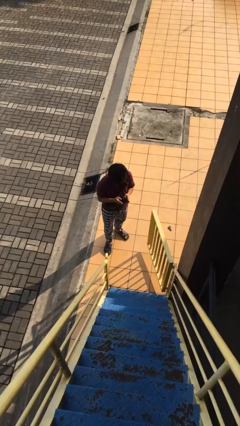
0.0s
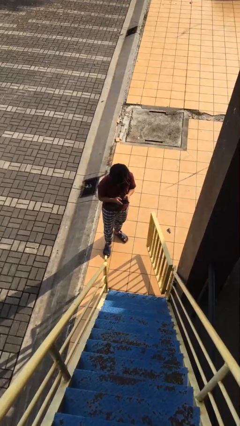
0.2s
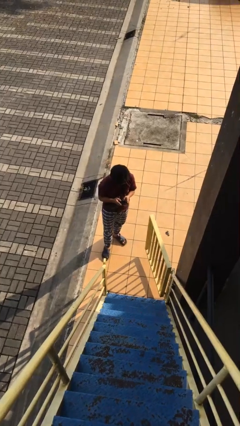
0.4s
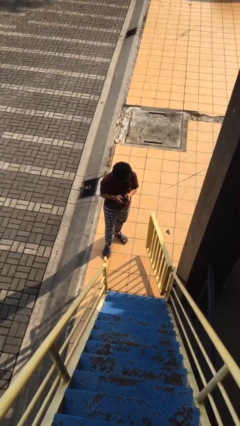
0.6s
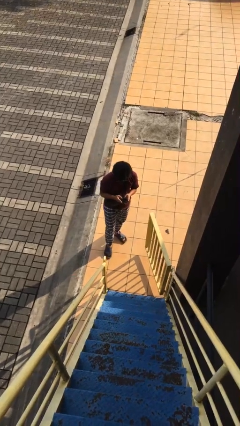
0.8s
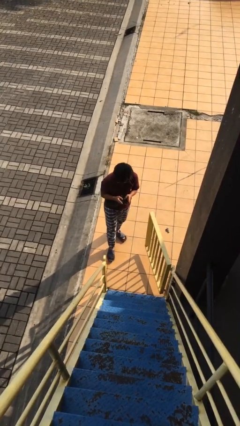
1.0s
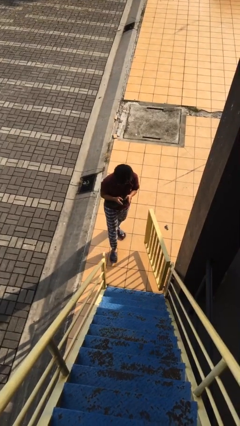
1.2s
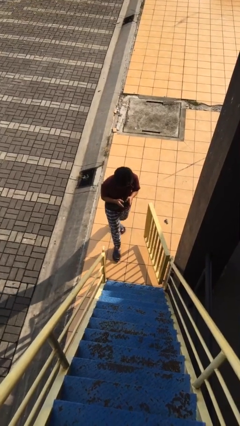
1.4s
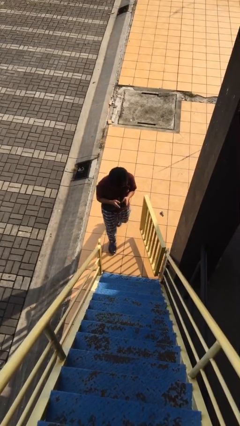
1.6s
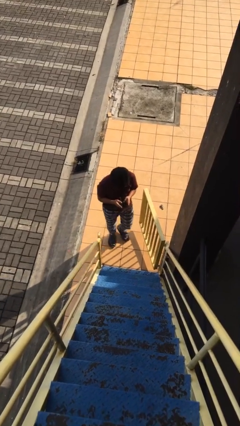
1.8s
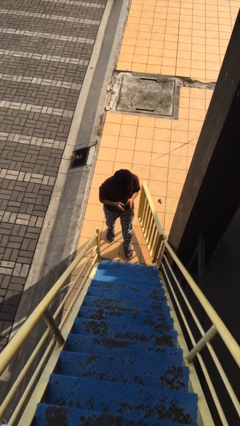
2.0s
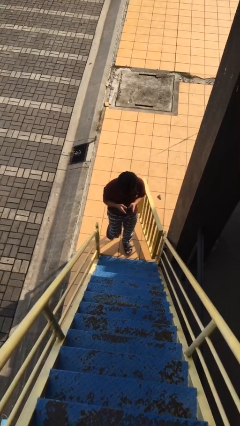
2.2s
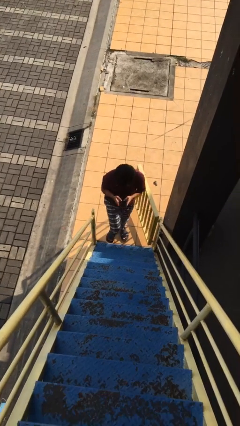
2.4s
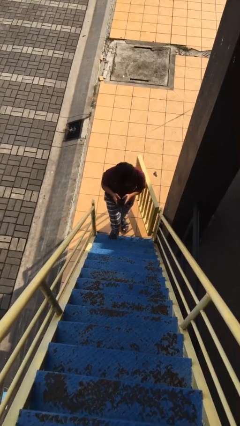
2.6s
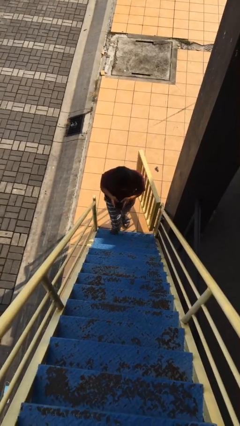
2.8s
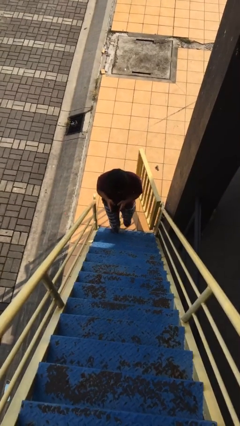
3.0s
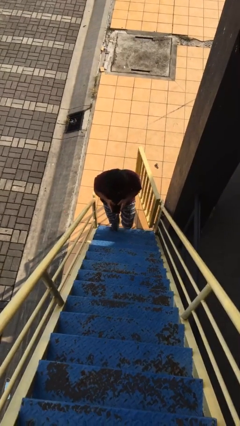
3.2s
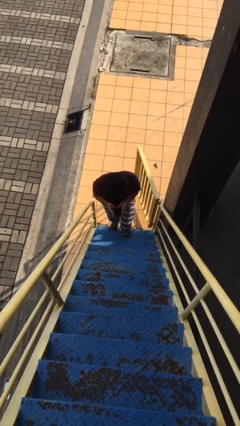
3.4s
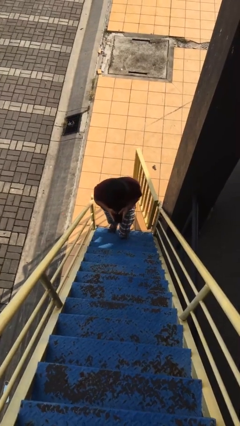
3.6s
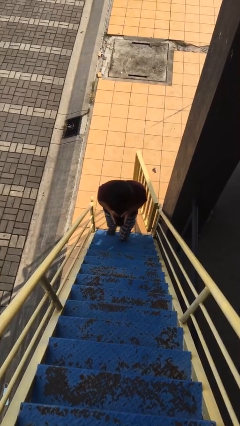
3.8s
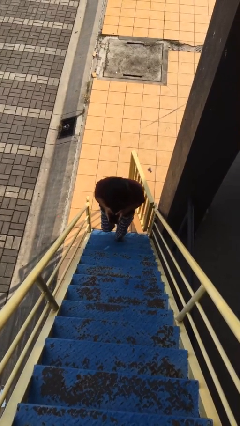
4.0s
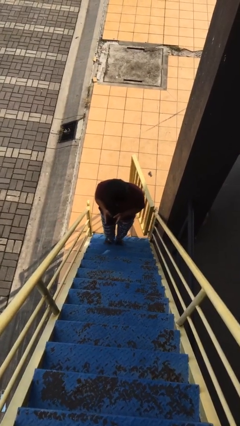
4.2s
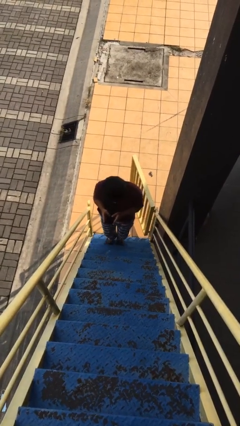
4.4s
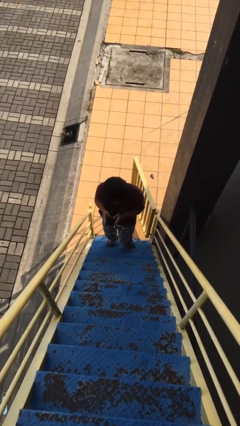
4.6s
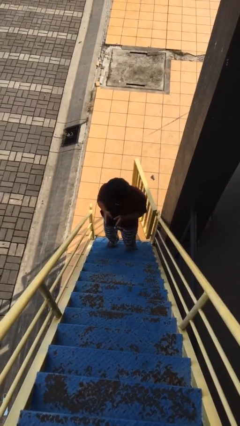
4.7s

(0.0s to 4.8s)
person enters scene through structure

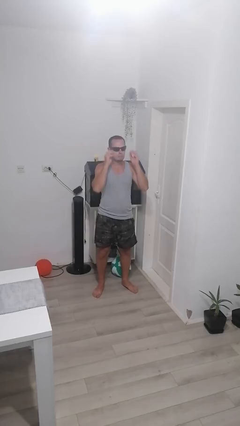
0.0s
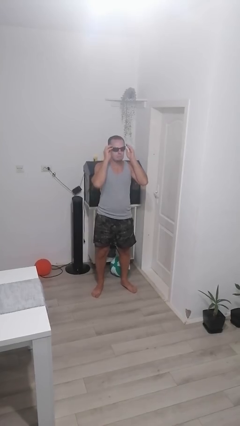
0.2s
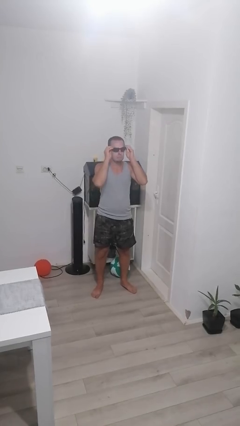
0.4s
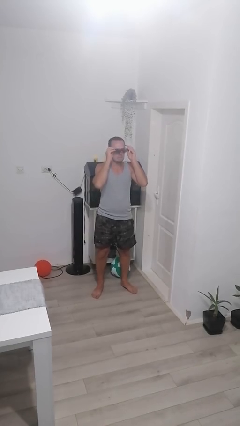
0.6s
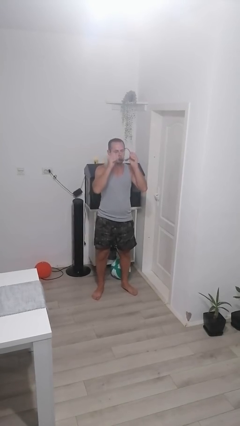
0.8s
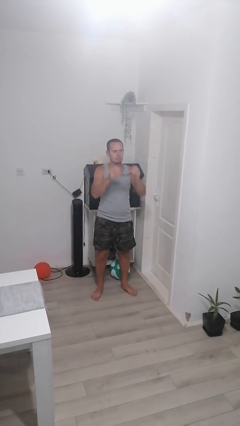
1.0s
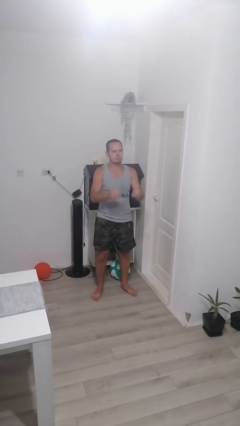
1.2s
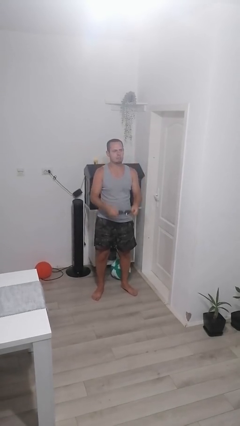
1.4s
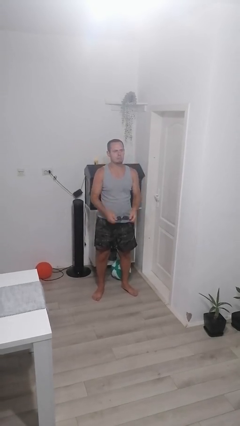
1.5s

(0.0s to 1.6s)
person takes off sunglasses

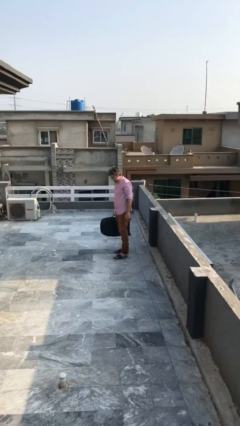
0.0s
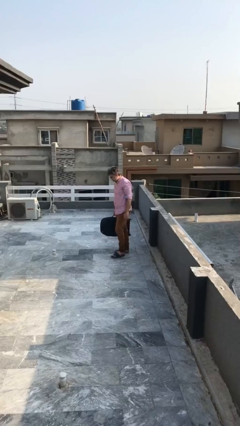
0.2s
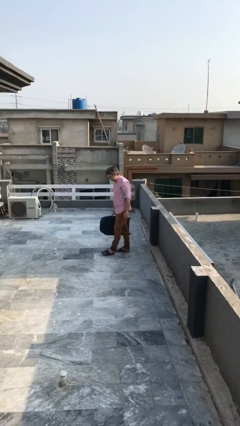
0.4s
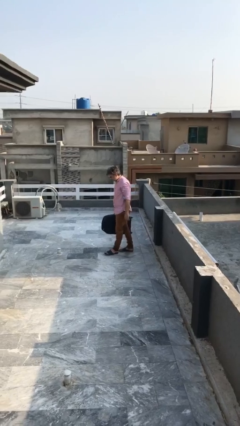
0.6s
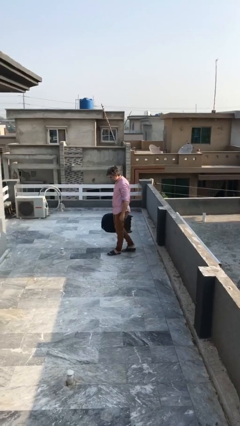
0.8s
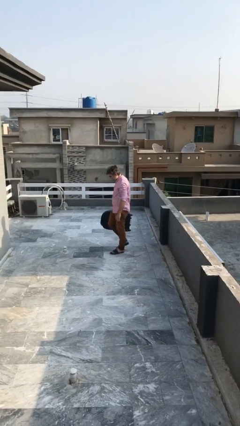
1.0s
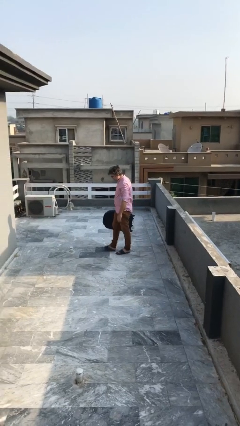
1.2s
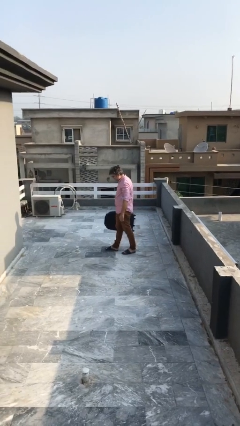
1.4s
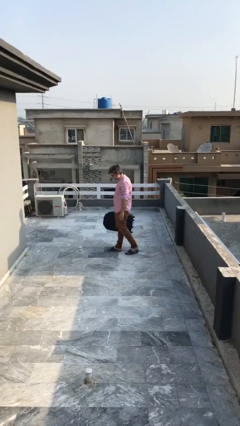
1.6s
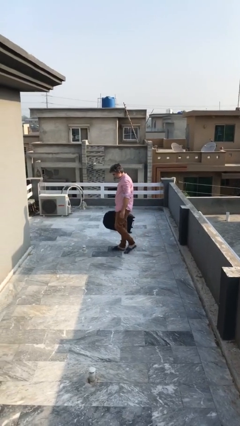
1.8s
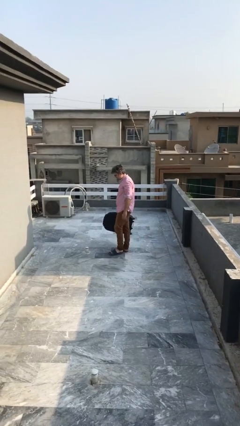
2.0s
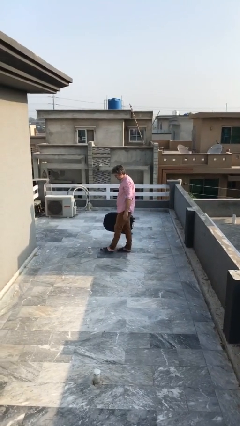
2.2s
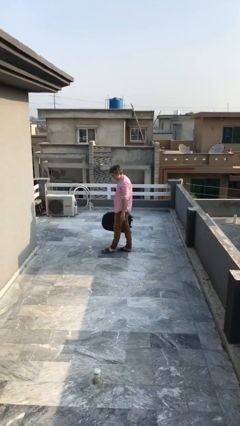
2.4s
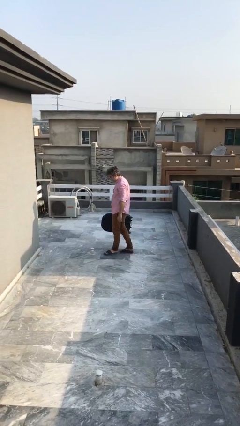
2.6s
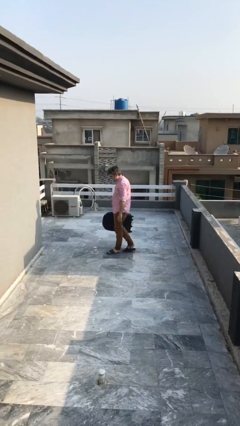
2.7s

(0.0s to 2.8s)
person carries heavy object

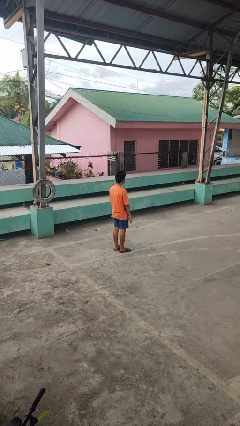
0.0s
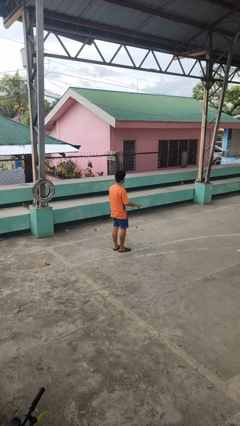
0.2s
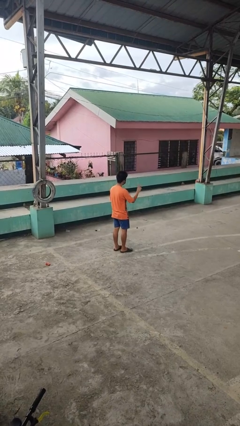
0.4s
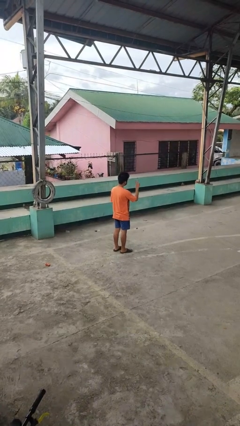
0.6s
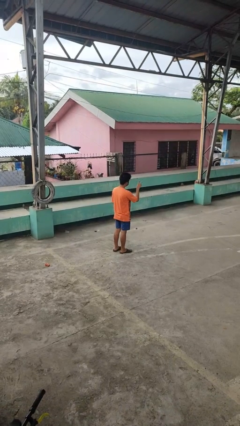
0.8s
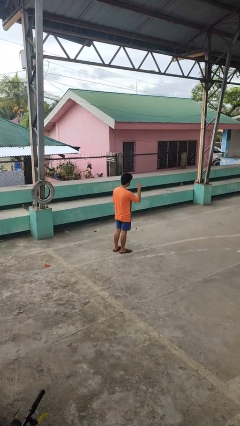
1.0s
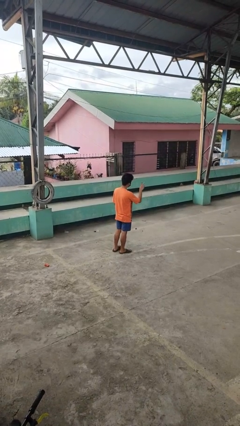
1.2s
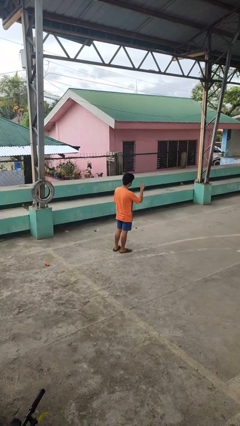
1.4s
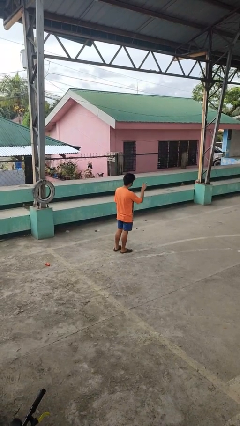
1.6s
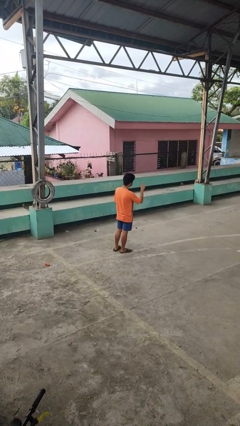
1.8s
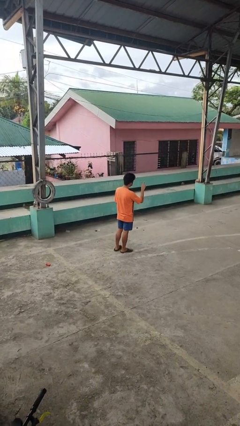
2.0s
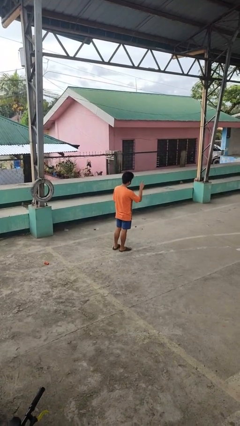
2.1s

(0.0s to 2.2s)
person gestures peace

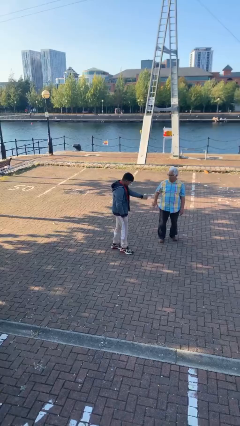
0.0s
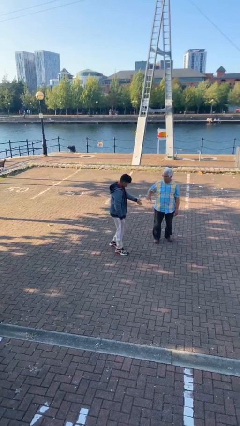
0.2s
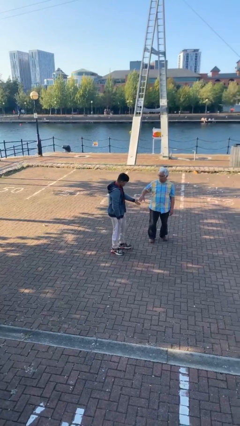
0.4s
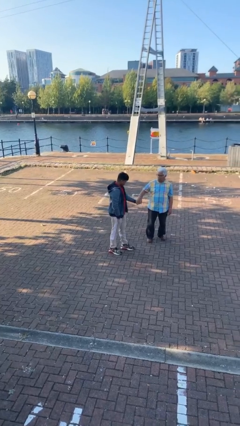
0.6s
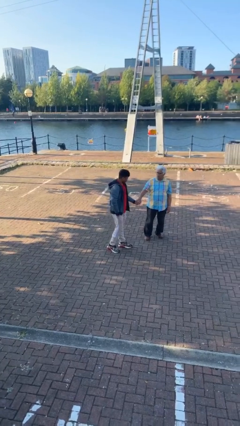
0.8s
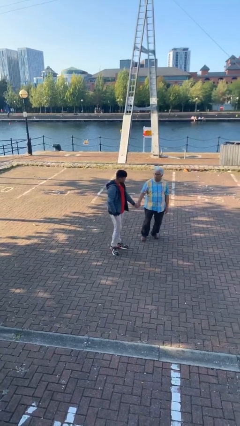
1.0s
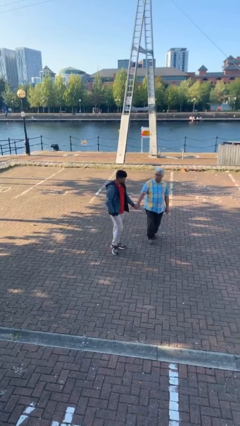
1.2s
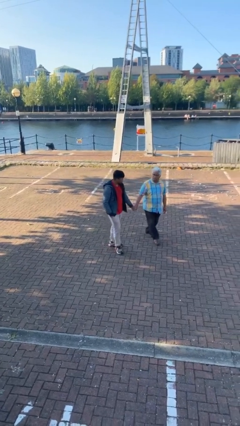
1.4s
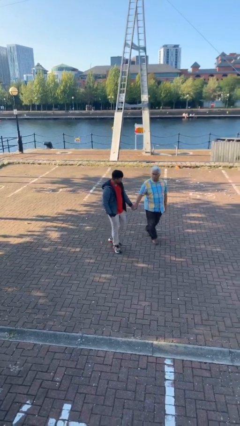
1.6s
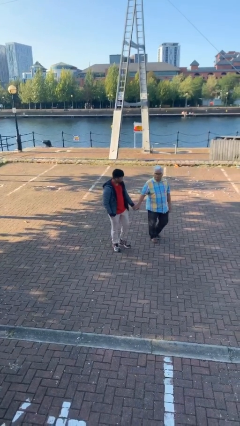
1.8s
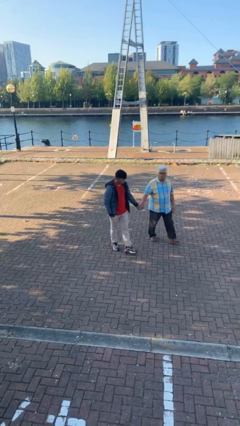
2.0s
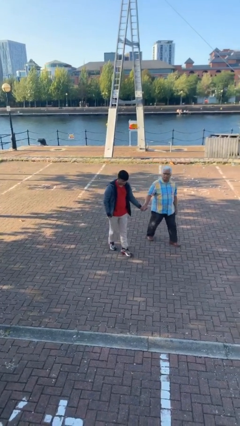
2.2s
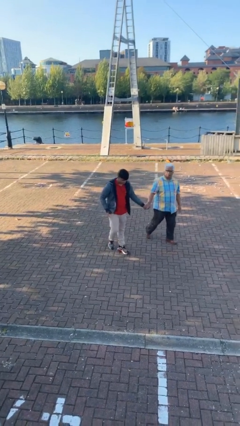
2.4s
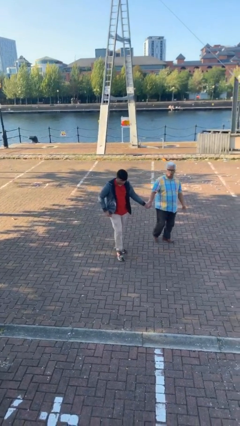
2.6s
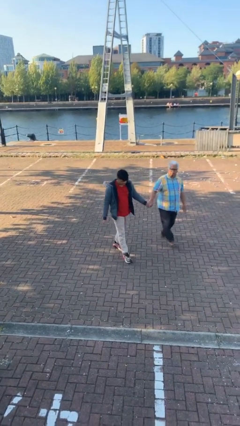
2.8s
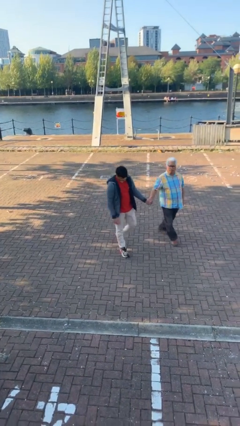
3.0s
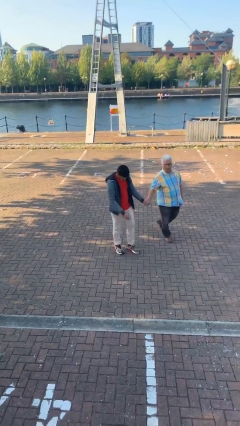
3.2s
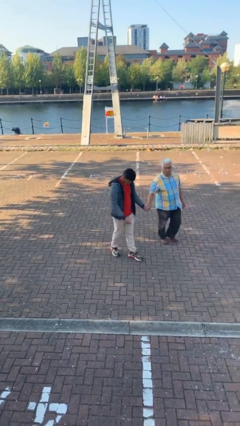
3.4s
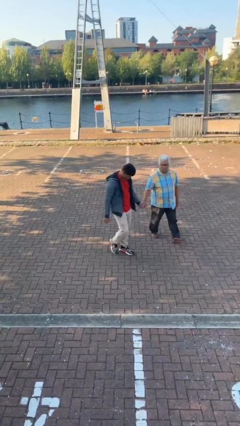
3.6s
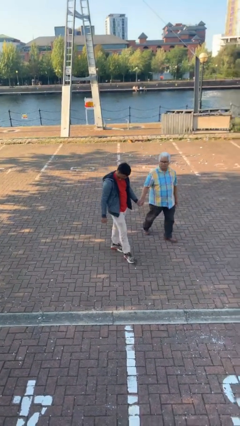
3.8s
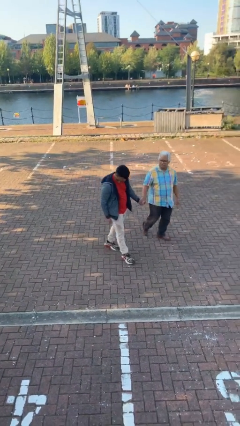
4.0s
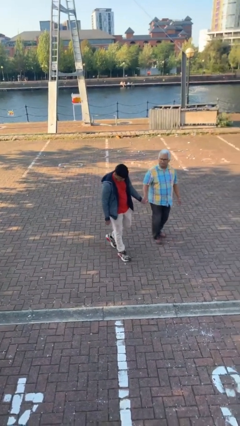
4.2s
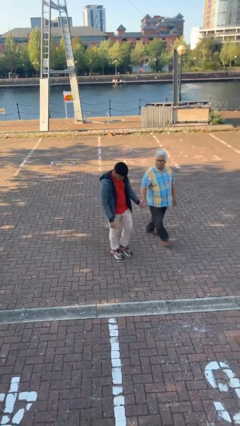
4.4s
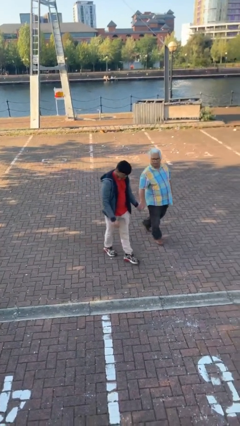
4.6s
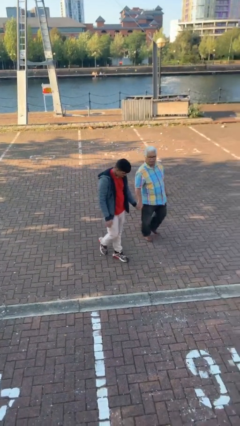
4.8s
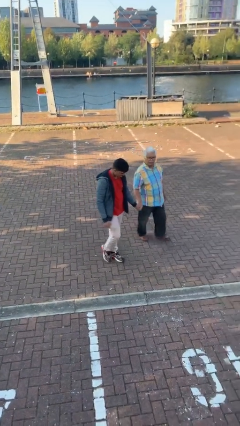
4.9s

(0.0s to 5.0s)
person holds hand

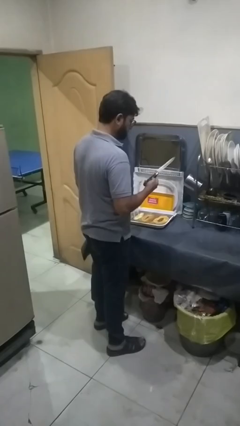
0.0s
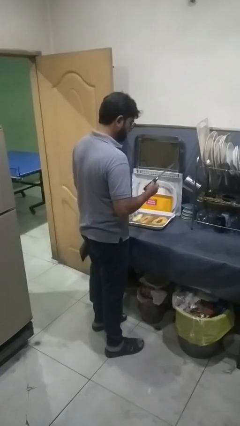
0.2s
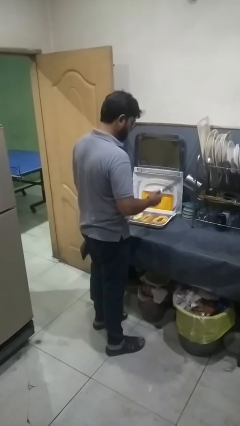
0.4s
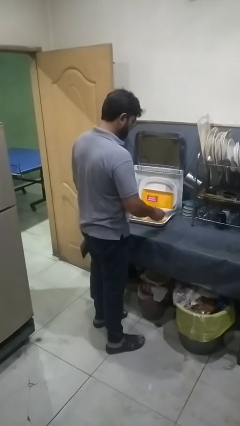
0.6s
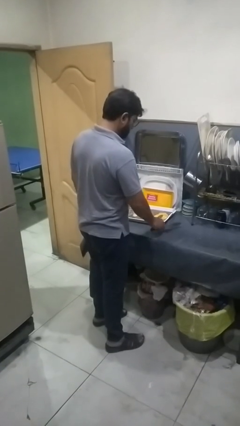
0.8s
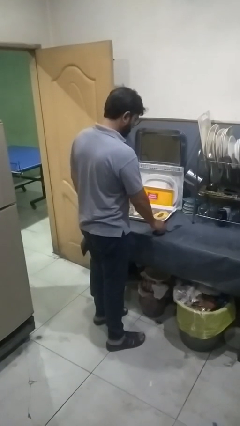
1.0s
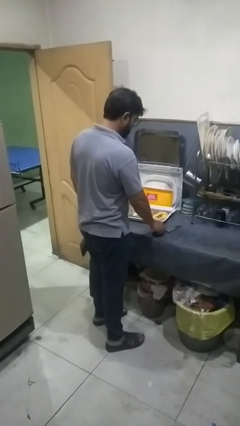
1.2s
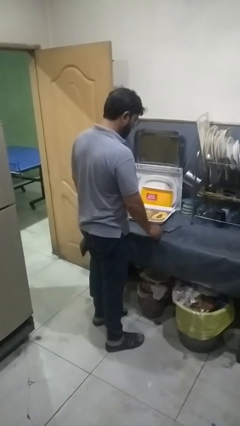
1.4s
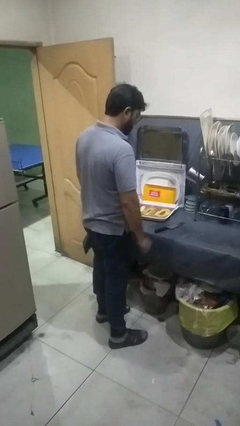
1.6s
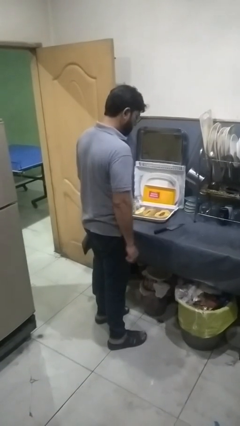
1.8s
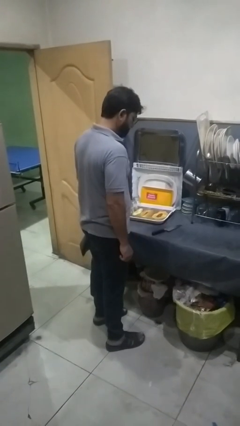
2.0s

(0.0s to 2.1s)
person puts down object on countertop
